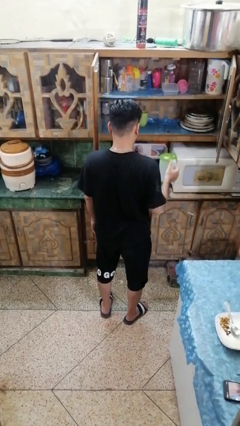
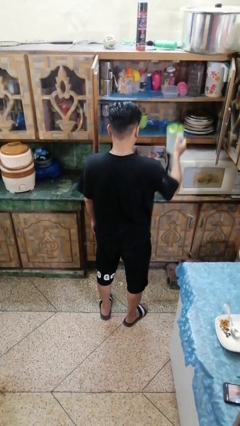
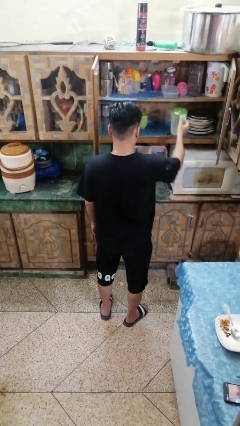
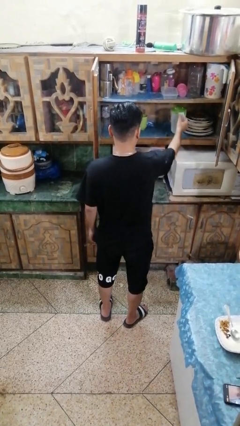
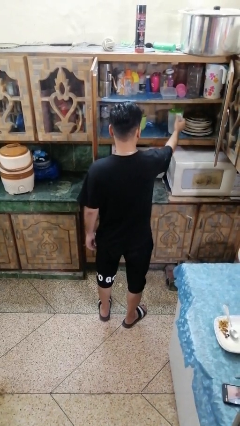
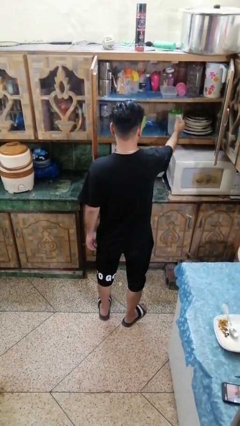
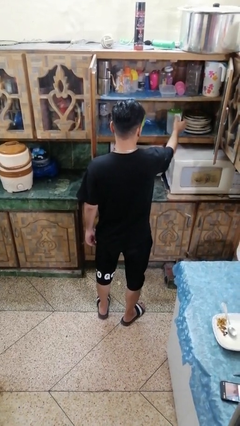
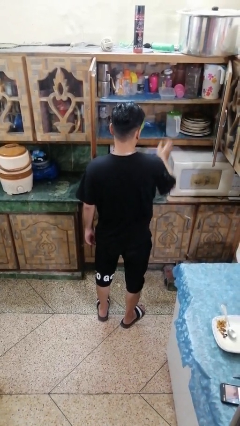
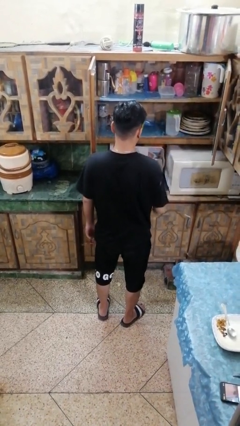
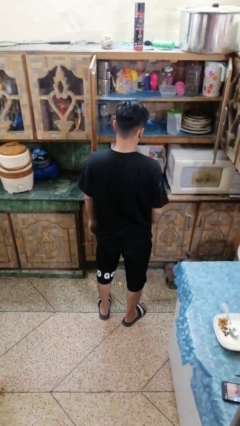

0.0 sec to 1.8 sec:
person puts down object into cabinet

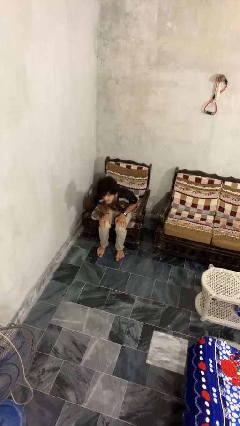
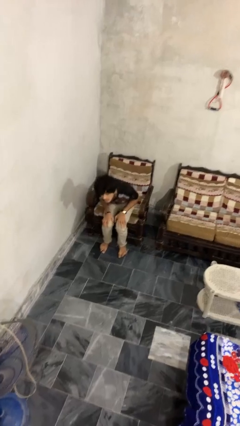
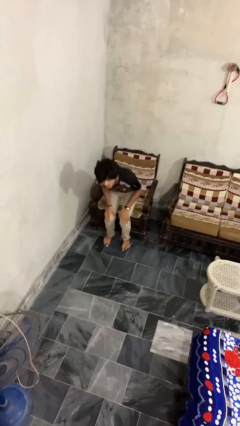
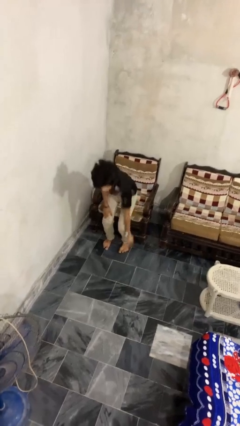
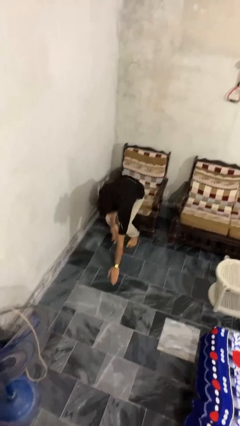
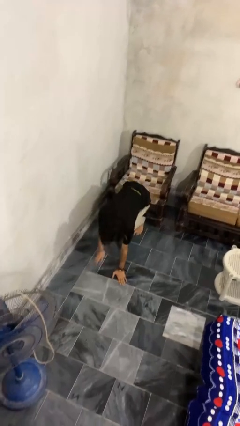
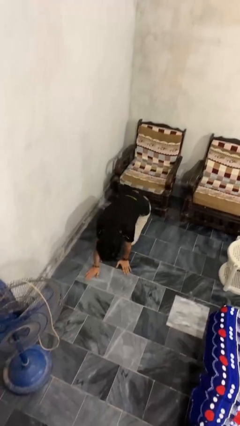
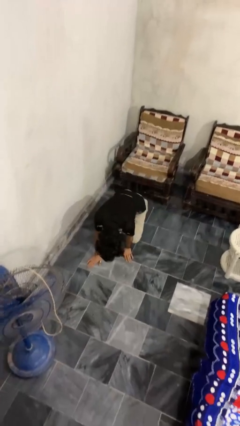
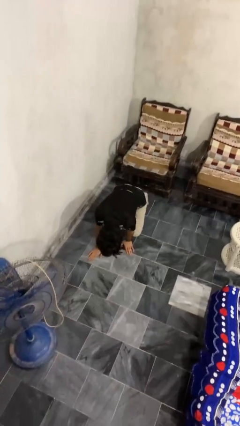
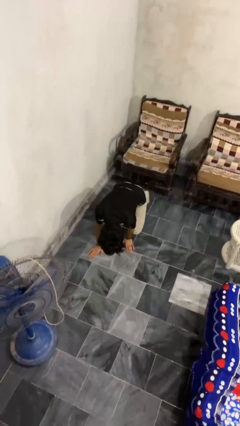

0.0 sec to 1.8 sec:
person falls from chair

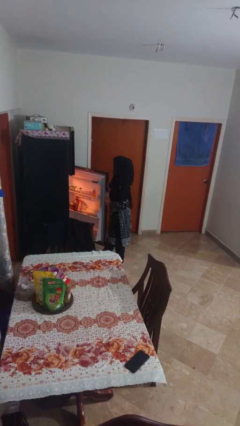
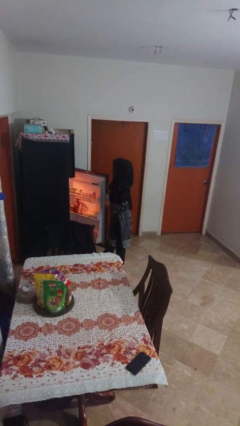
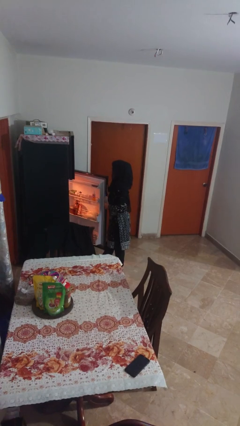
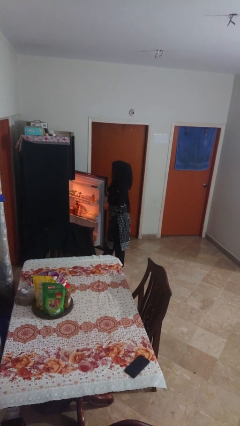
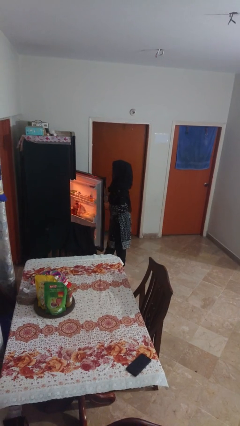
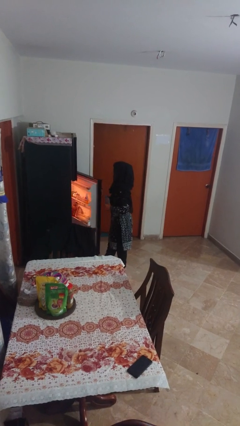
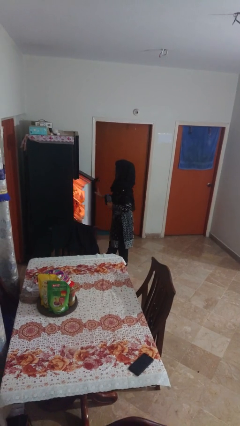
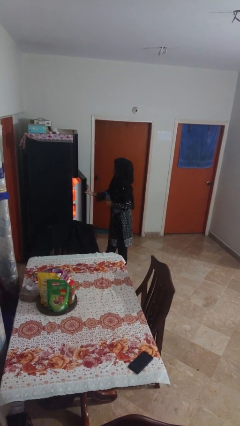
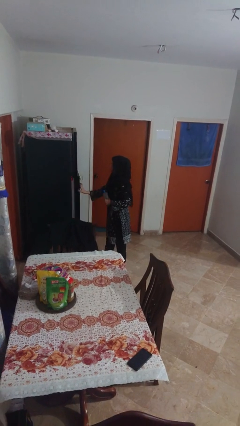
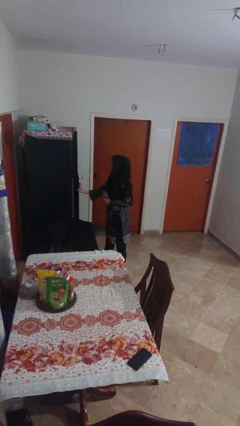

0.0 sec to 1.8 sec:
person closes refrigerator

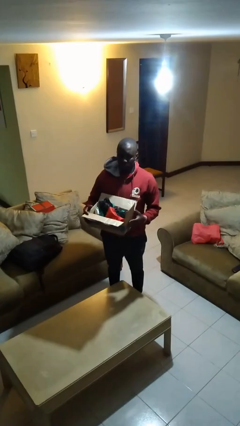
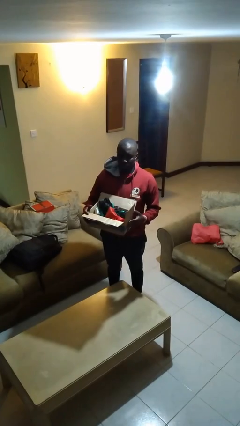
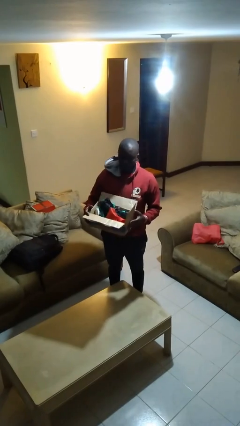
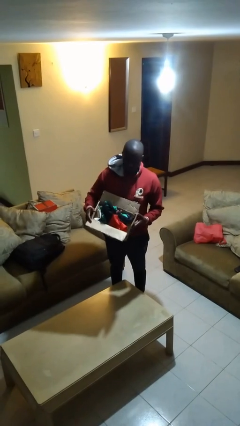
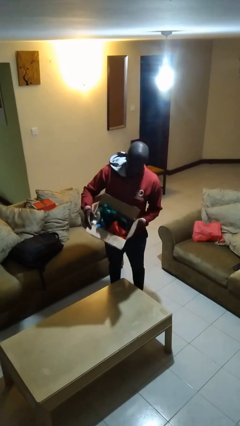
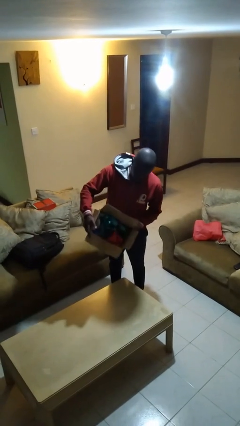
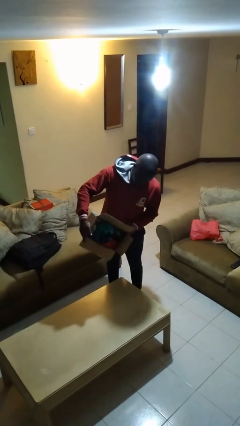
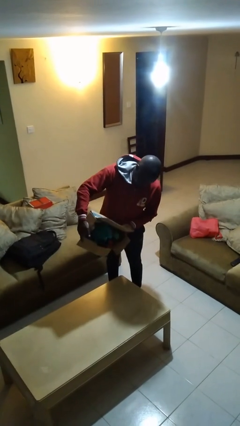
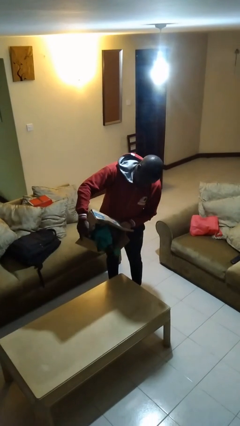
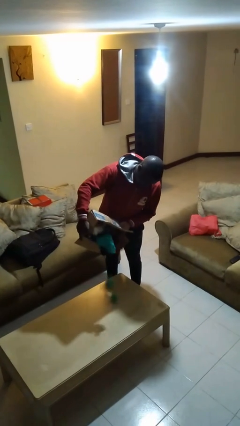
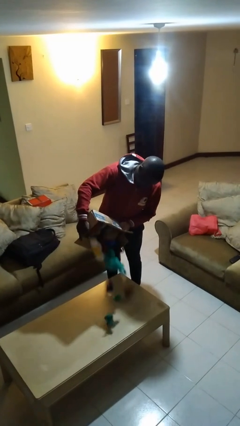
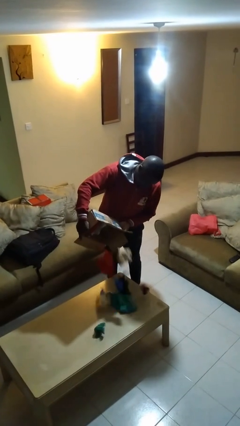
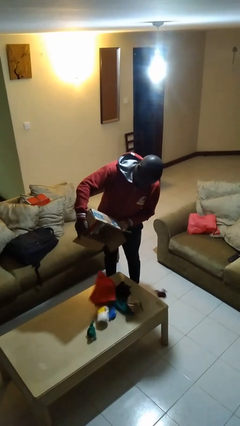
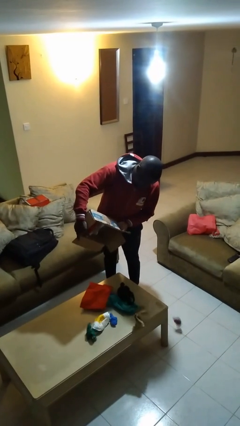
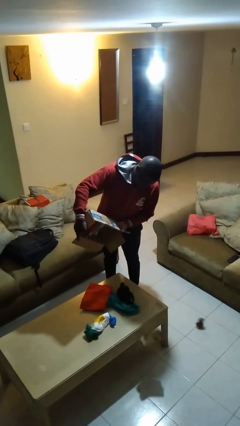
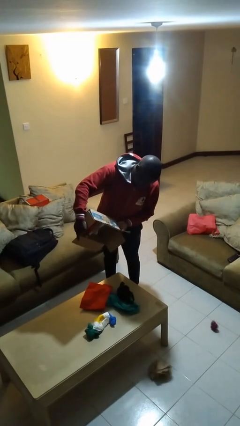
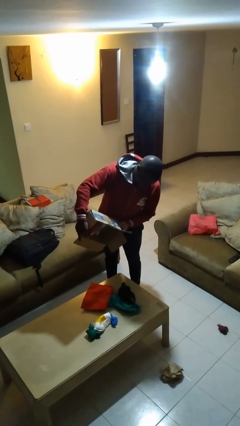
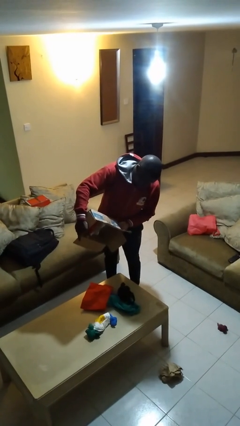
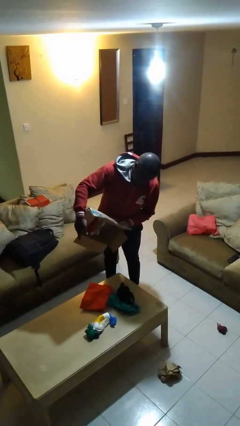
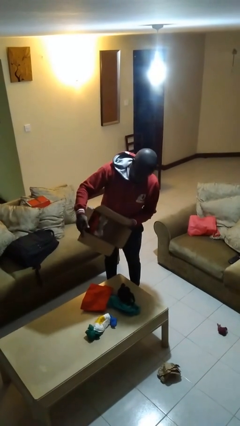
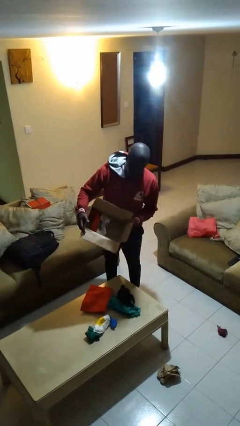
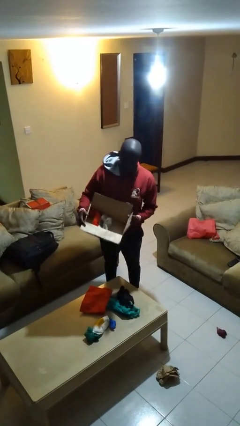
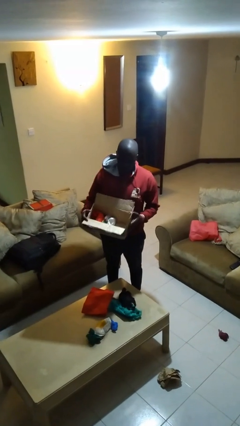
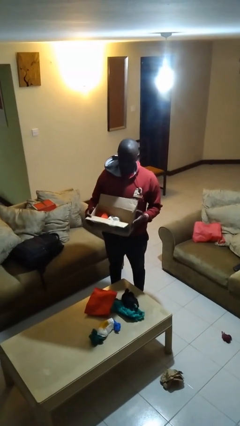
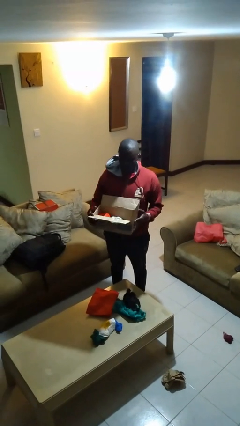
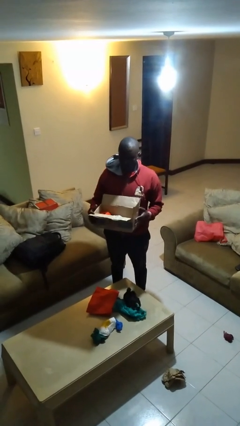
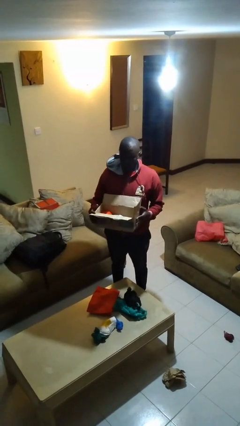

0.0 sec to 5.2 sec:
person unloads box onto table

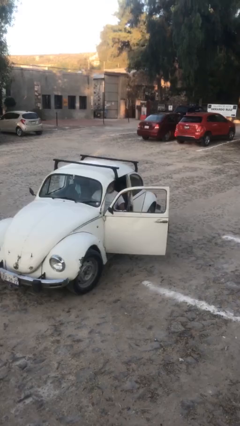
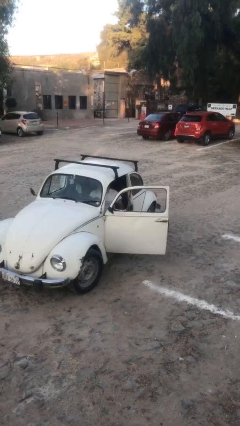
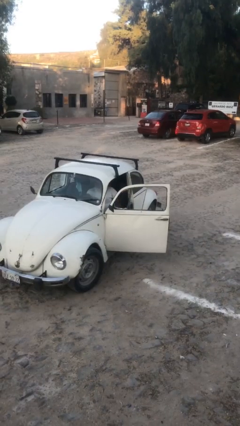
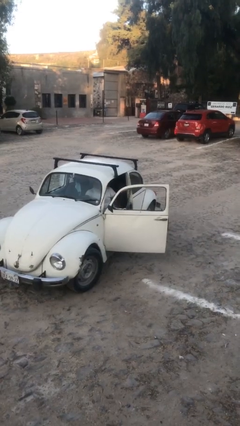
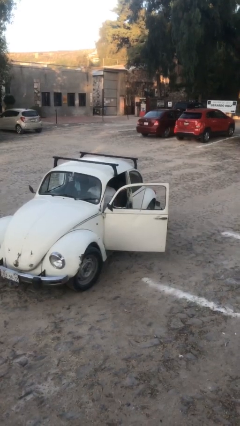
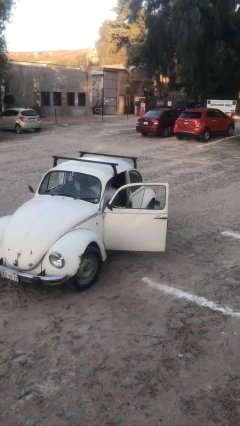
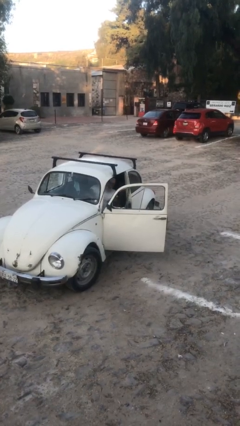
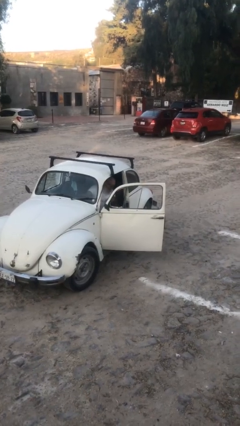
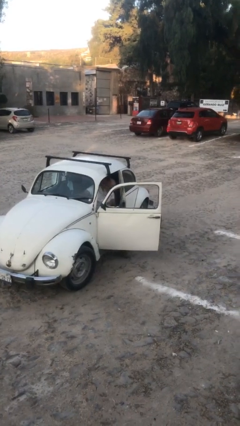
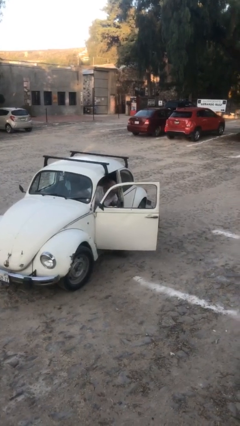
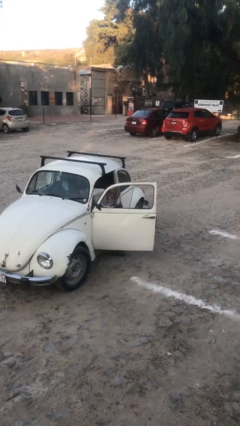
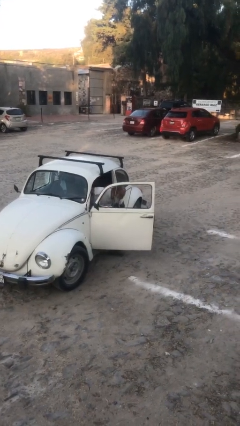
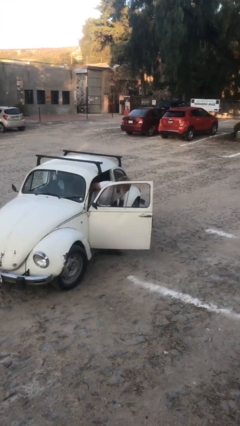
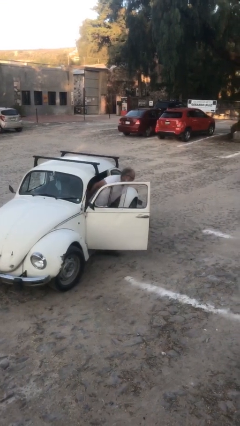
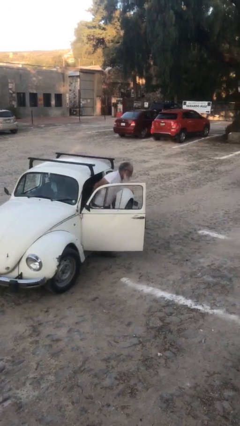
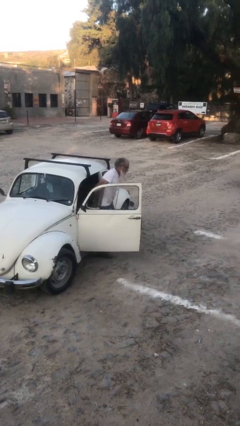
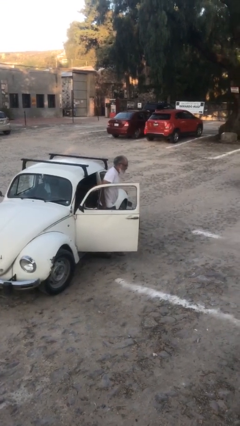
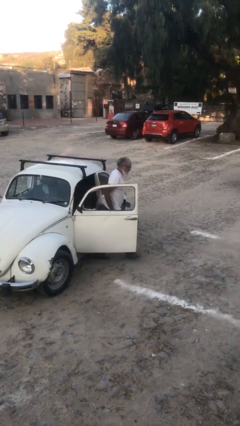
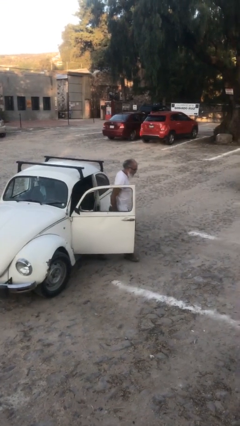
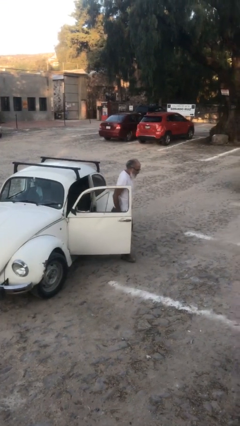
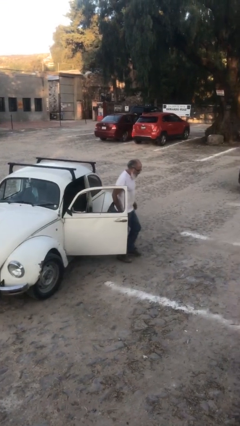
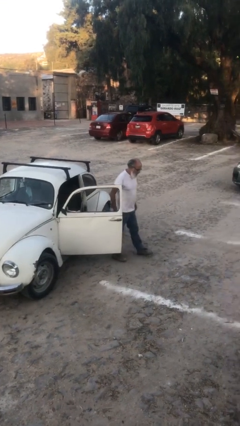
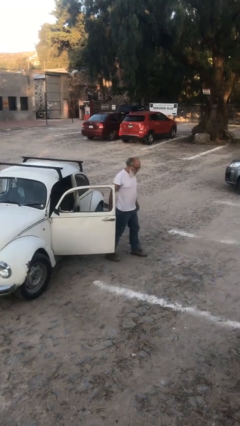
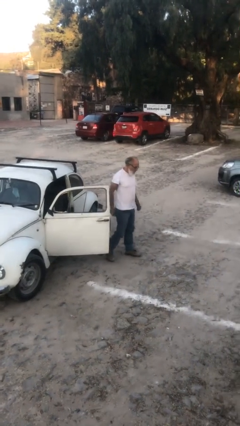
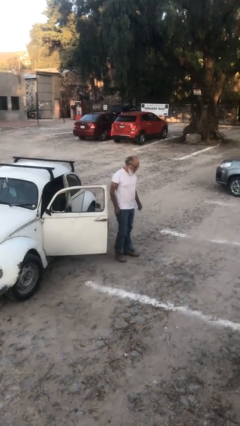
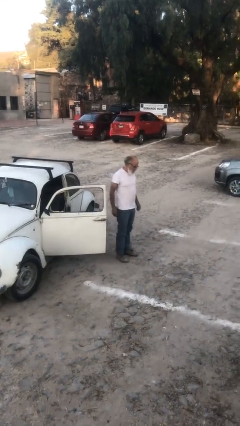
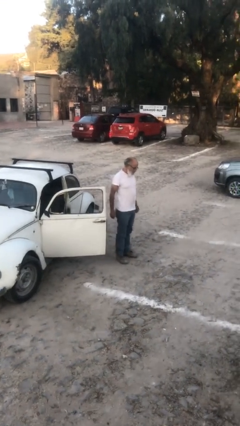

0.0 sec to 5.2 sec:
person exits car

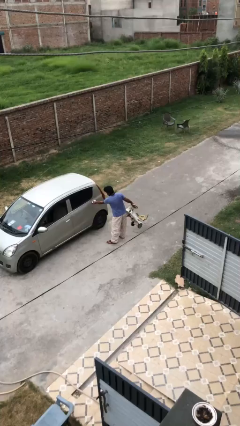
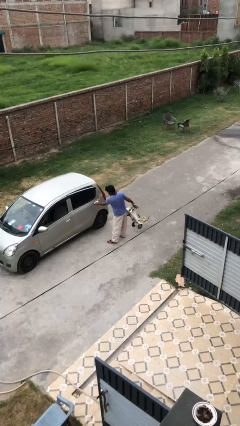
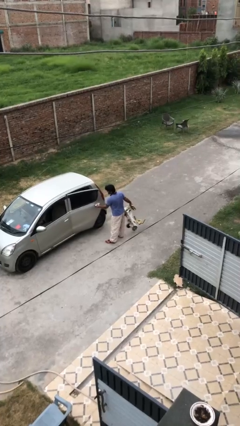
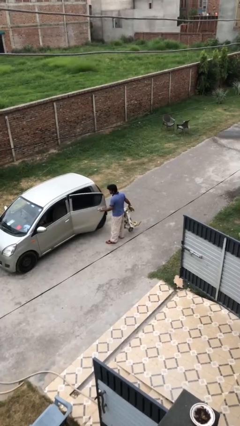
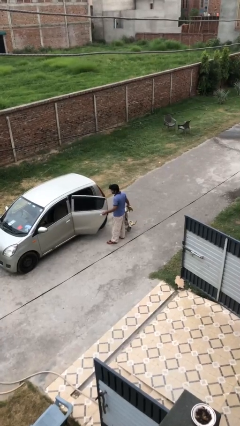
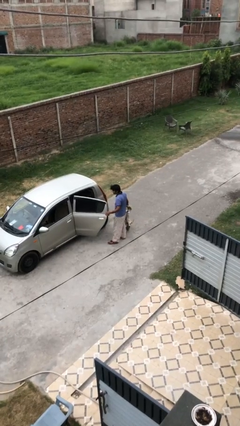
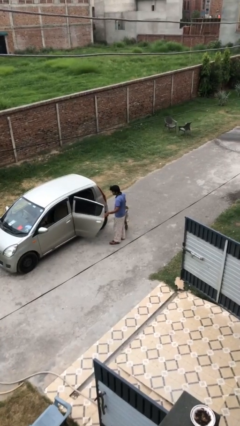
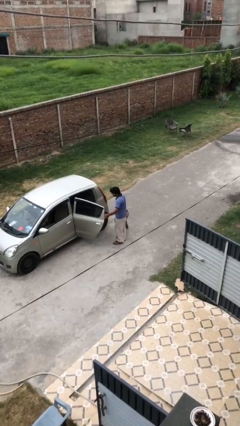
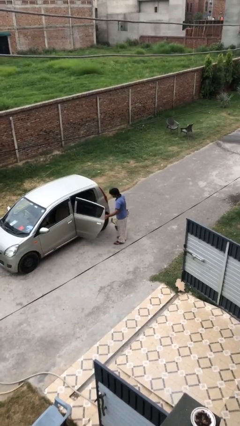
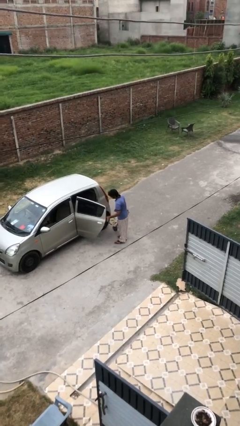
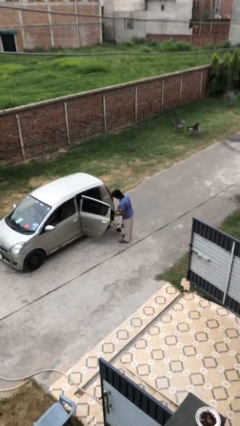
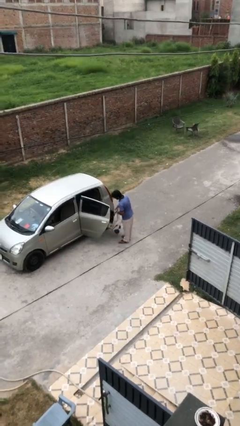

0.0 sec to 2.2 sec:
person opens car door
